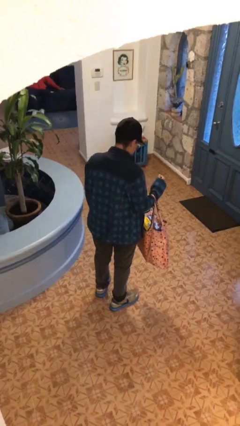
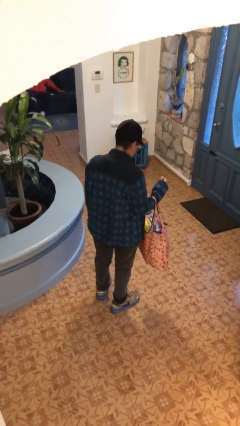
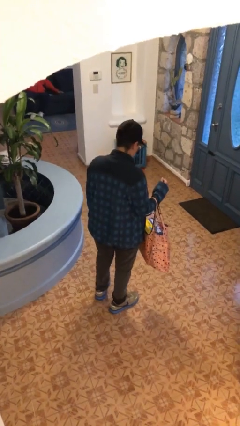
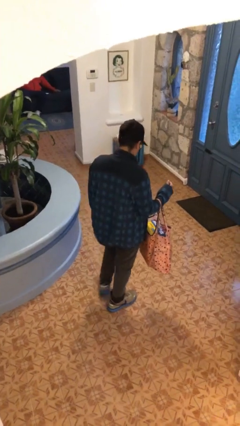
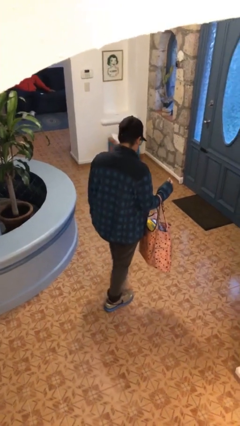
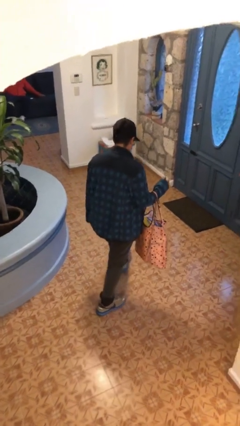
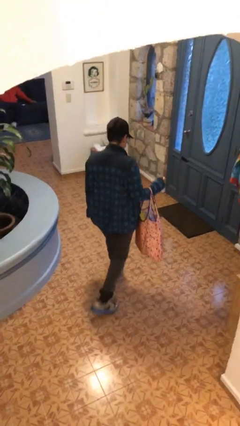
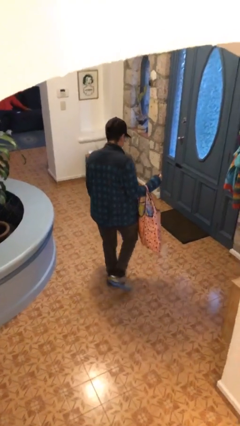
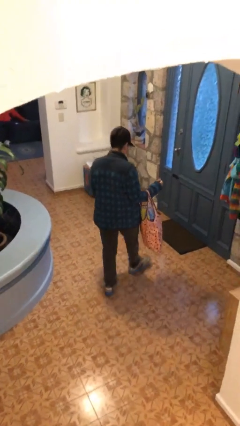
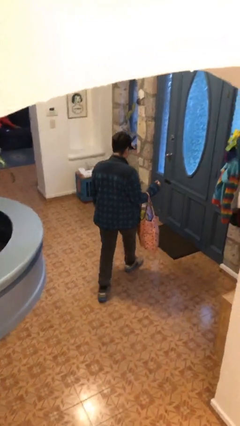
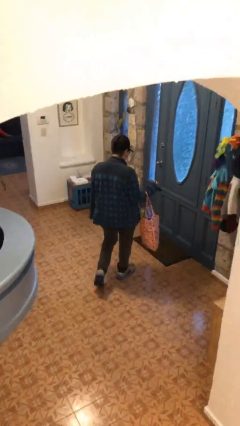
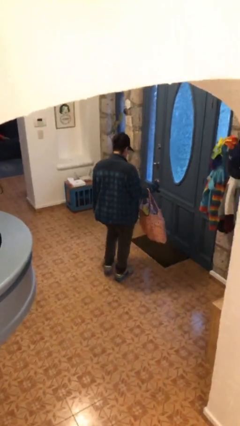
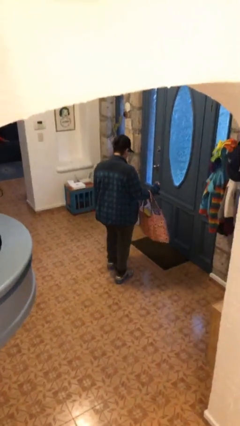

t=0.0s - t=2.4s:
person carries groceries

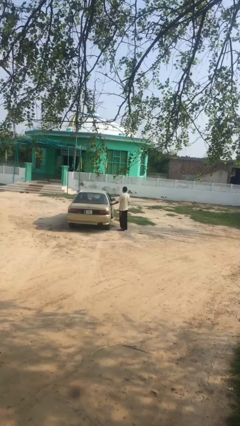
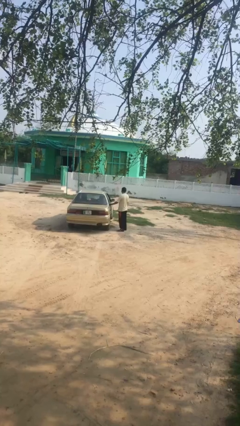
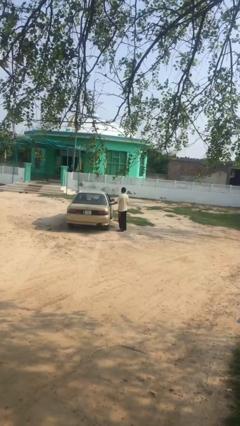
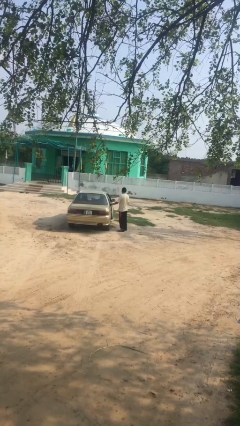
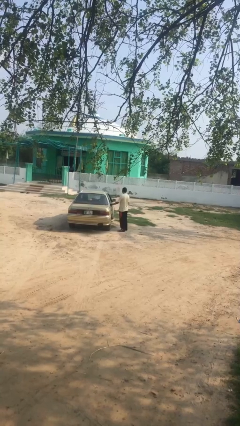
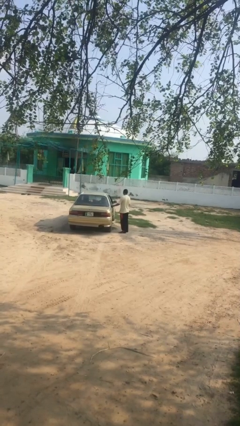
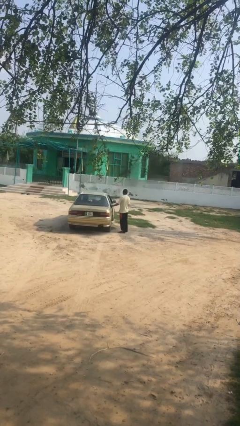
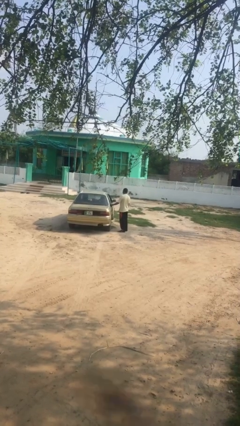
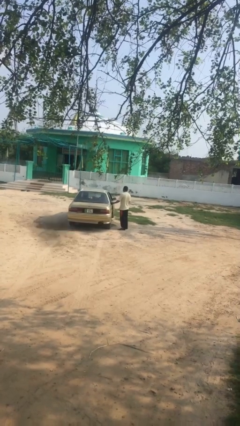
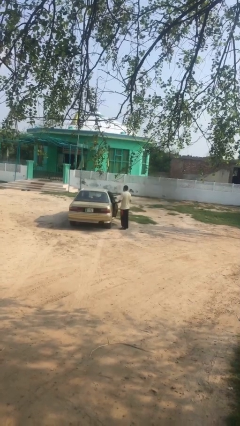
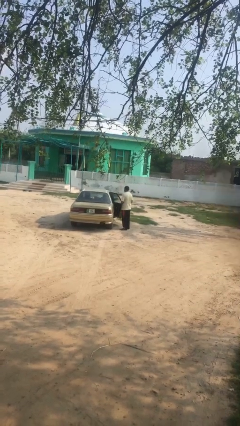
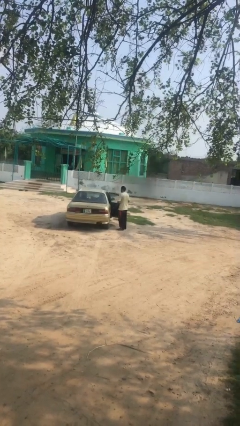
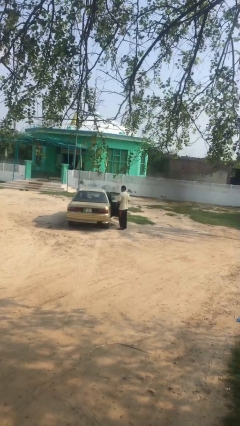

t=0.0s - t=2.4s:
person opens car door

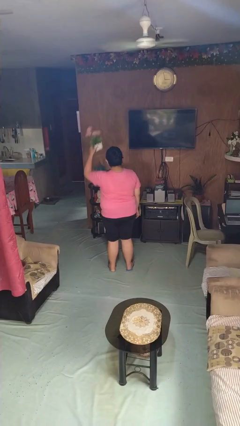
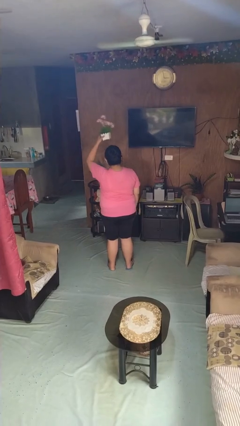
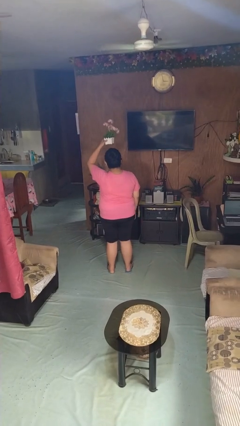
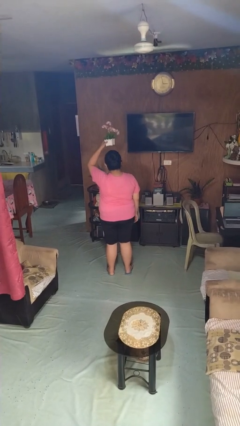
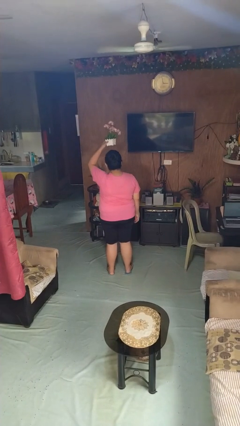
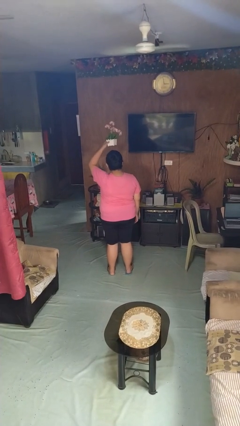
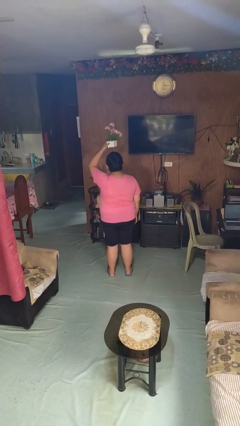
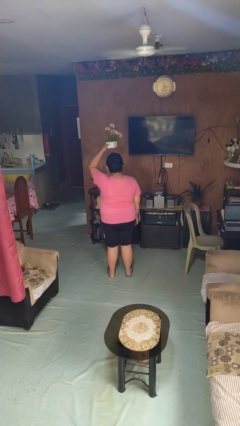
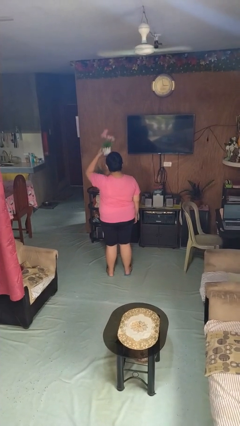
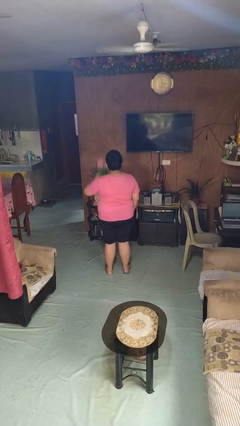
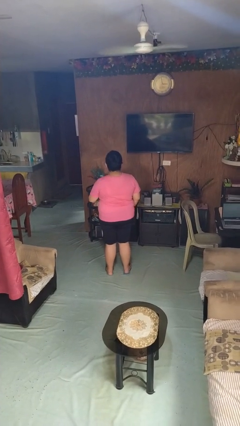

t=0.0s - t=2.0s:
person holds object above head

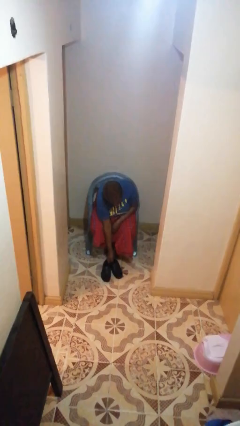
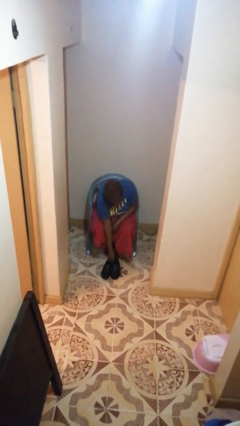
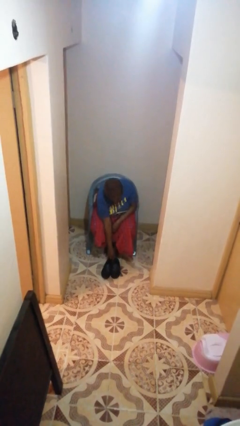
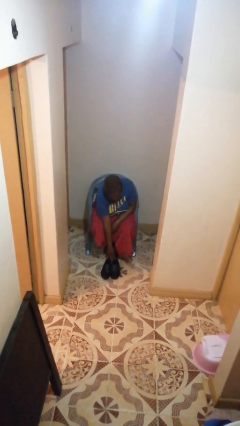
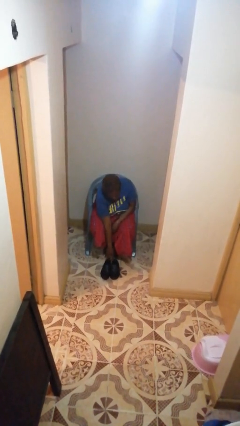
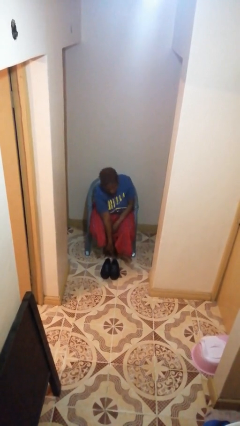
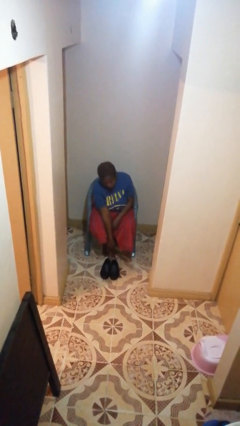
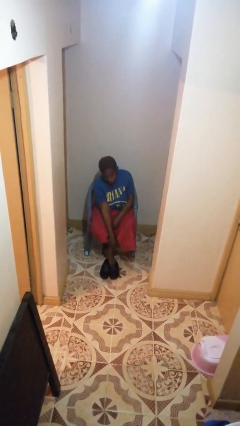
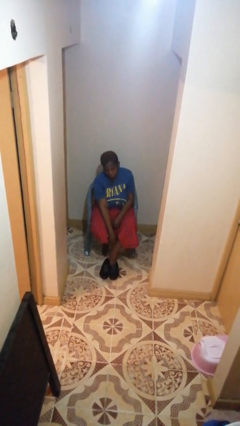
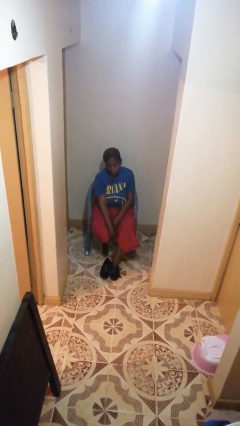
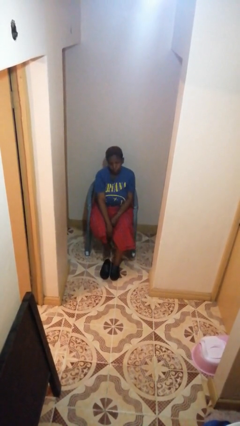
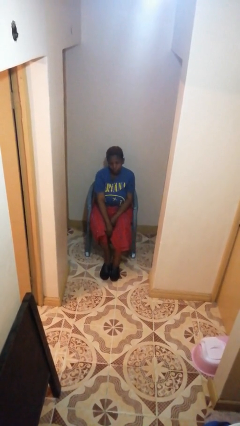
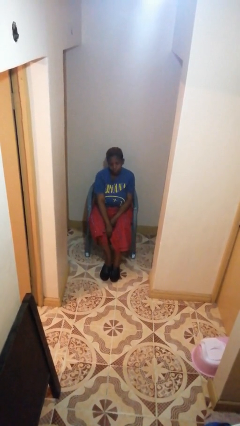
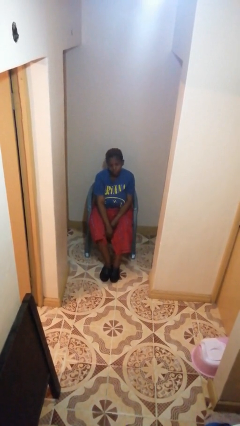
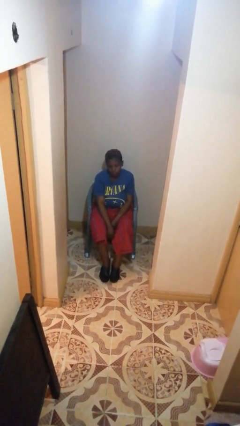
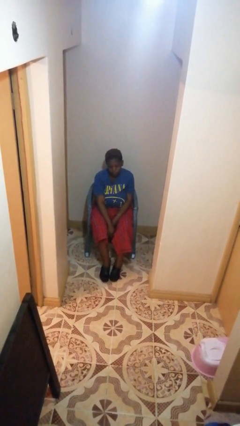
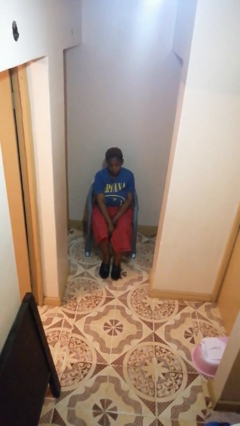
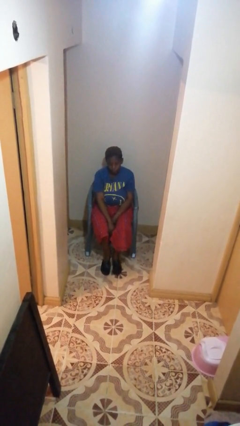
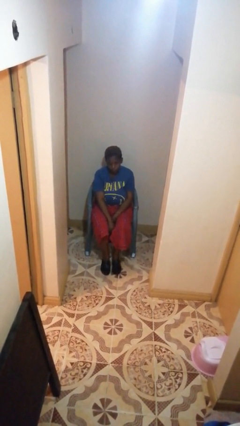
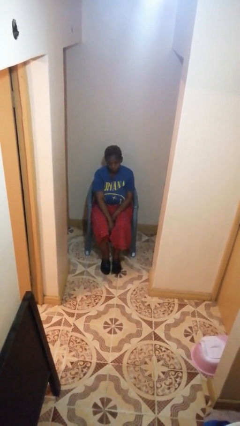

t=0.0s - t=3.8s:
person puts on shoes

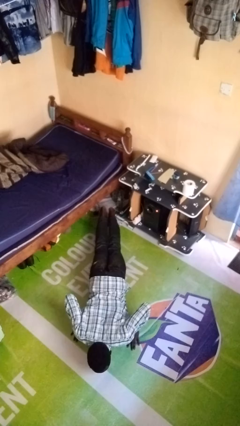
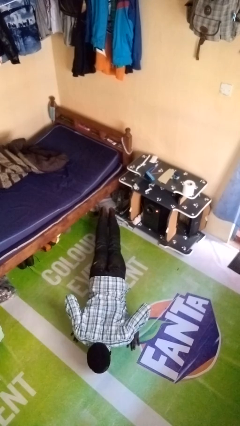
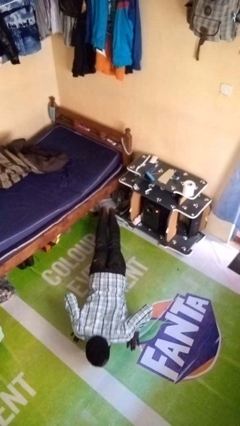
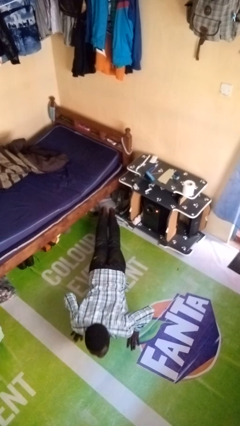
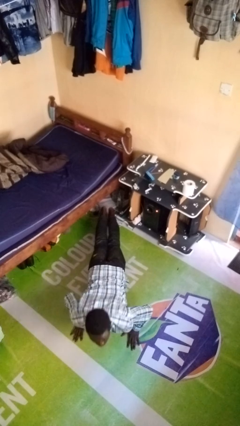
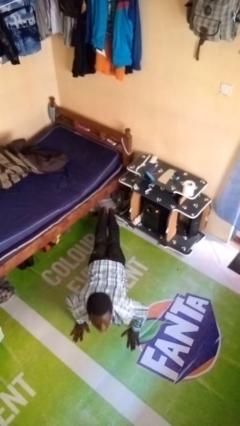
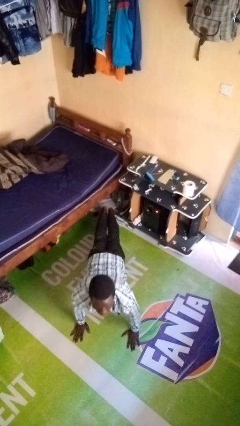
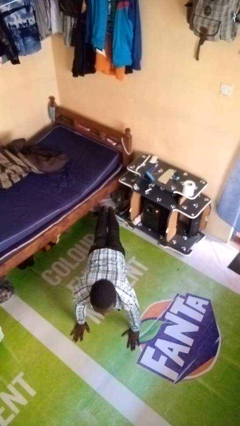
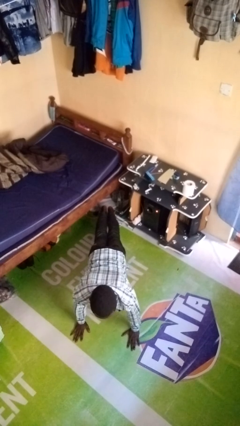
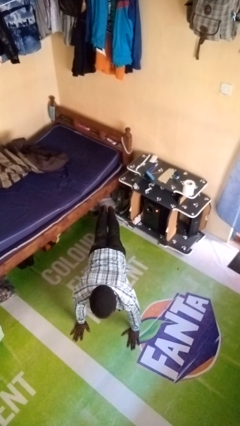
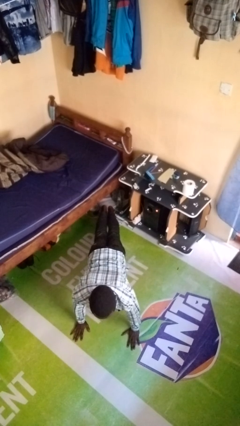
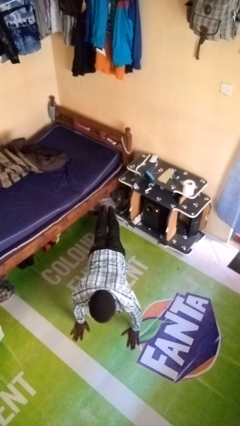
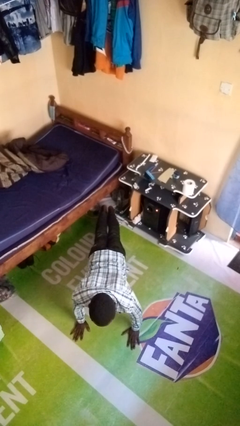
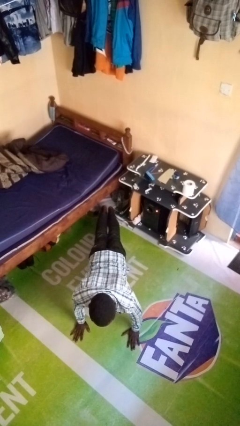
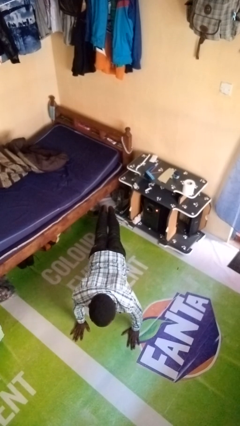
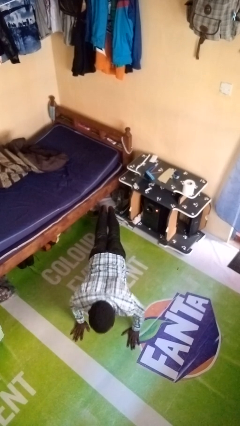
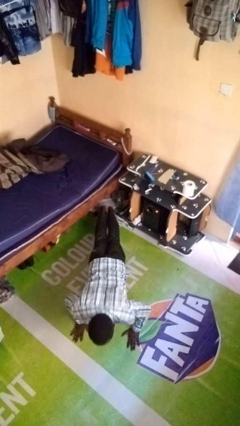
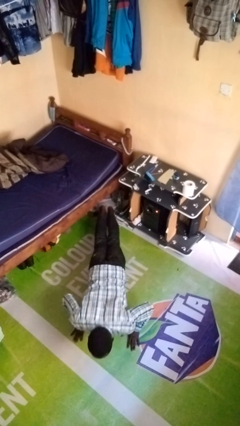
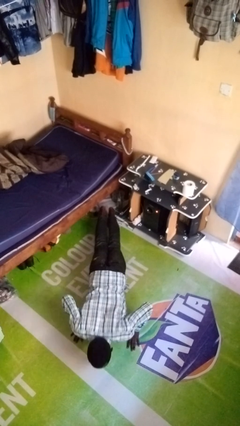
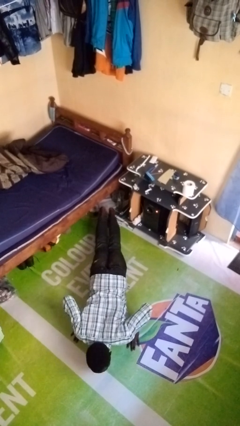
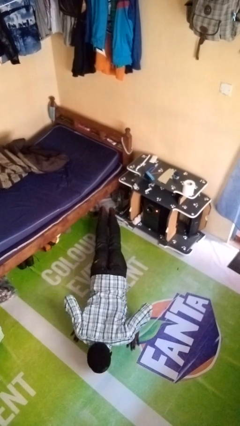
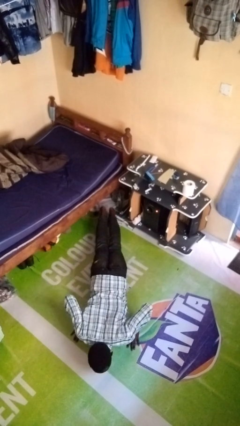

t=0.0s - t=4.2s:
person exercises with pushup

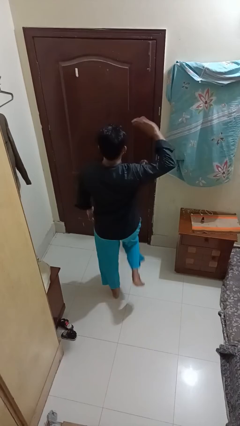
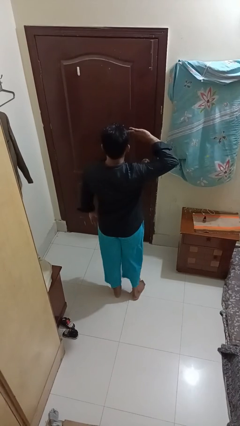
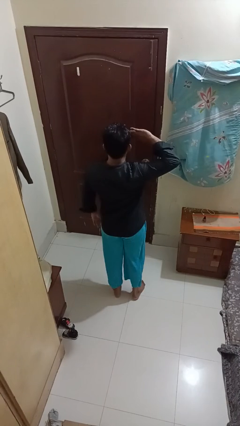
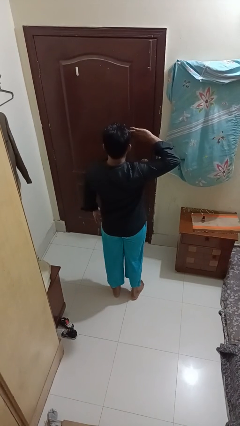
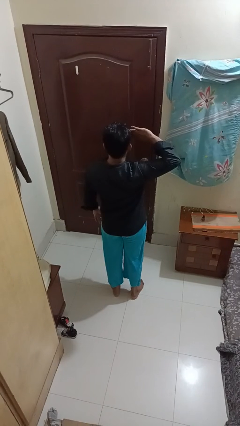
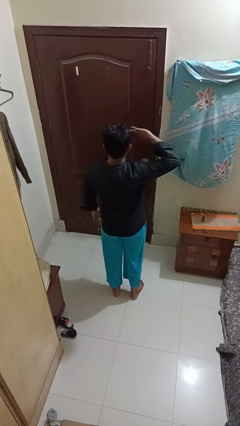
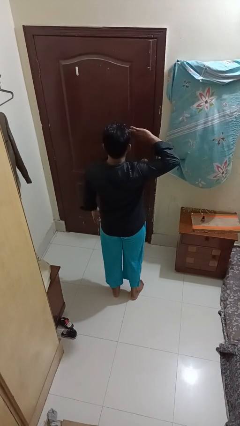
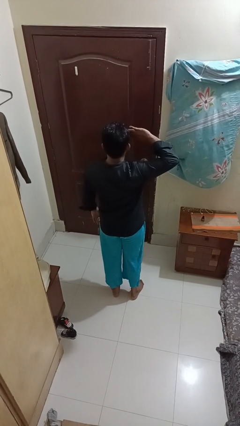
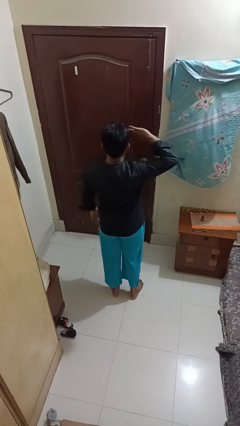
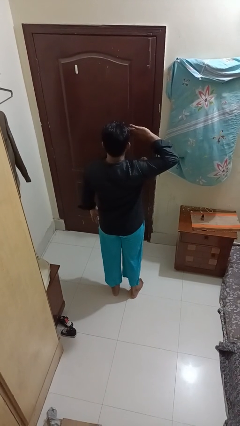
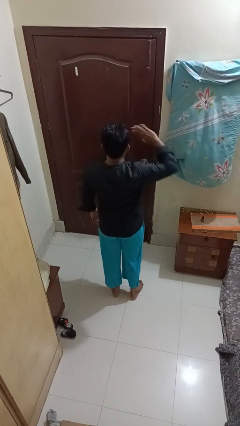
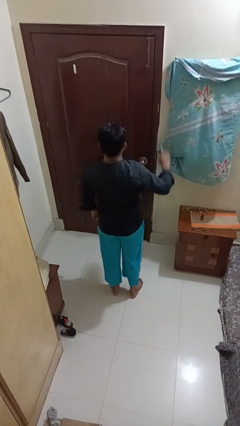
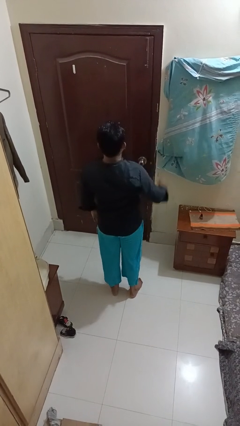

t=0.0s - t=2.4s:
person salutes

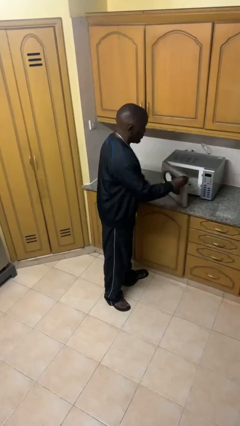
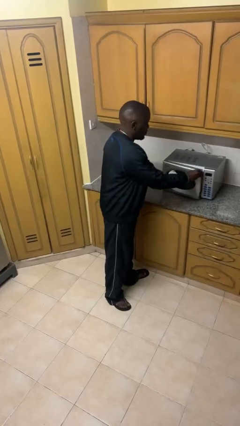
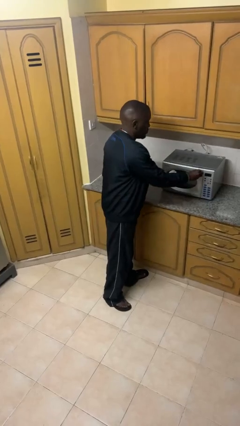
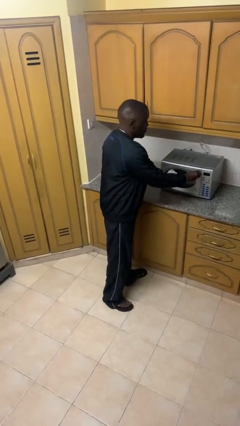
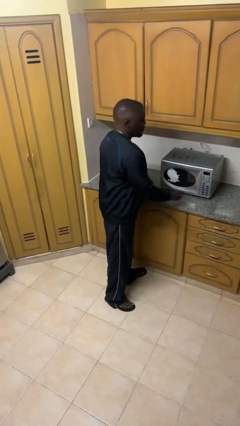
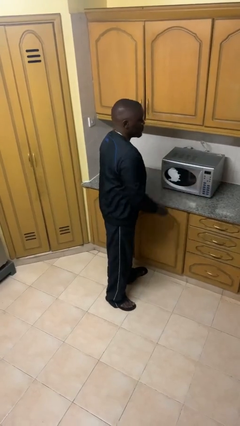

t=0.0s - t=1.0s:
person closes microwave
